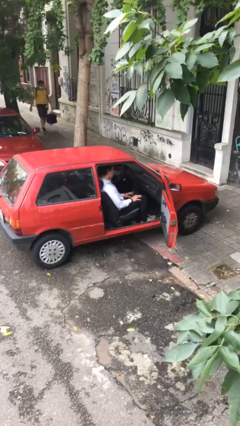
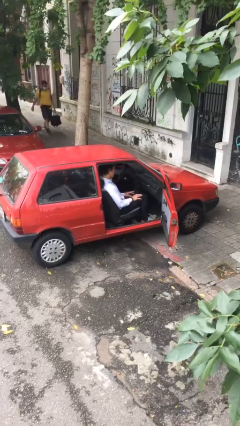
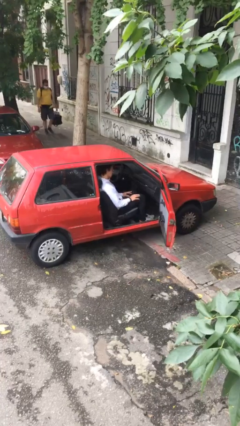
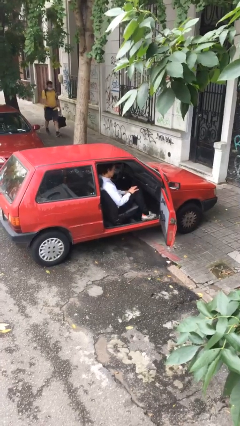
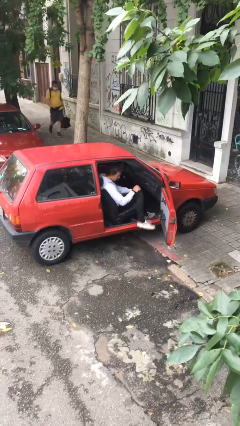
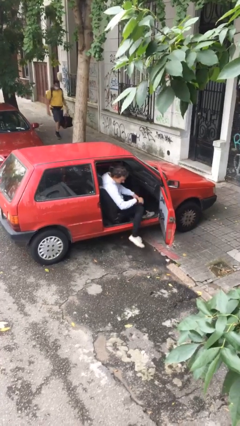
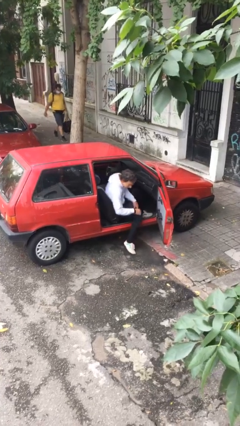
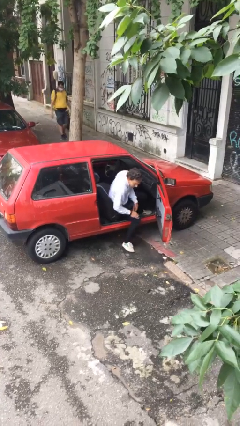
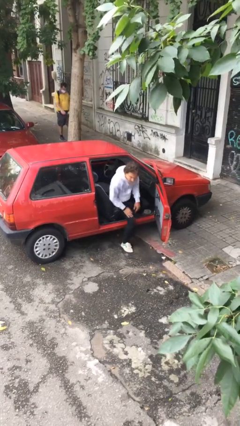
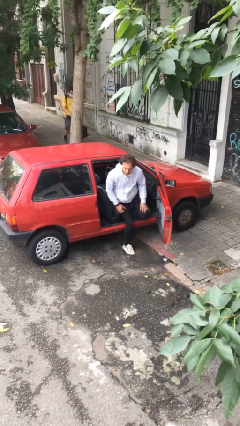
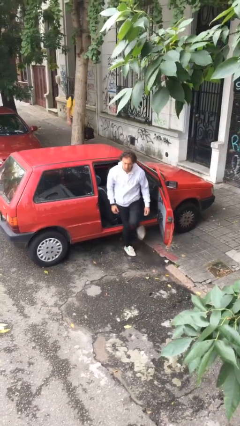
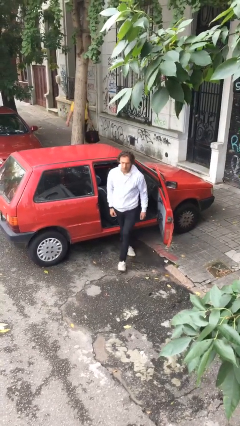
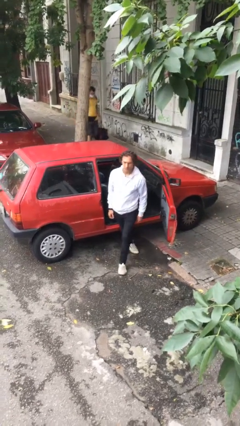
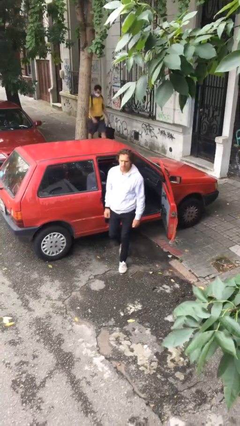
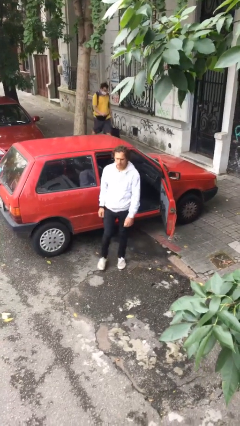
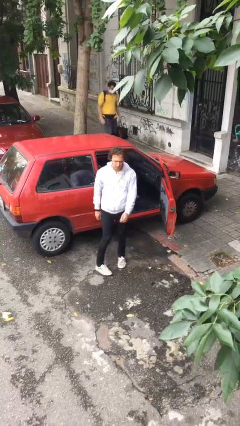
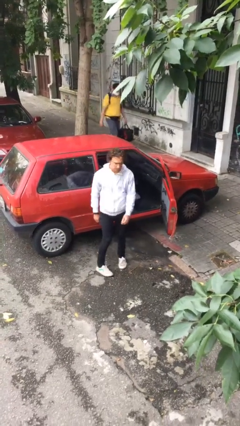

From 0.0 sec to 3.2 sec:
person exits car

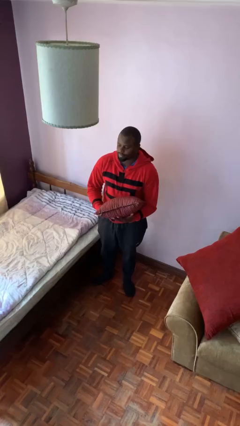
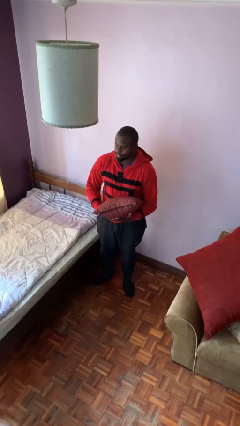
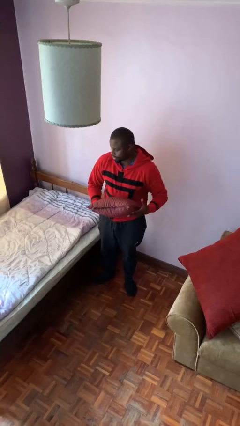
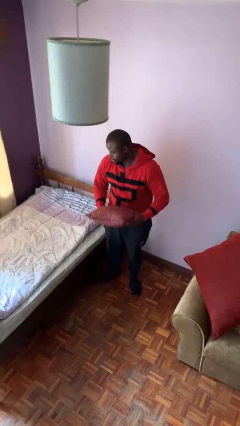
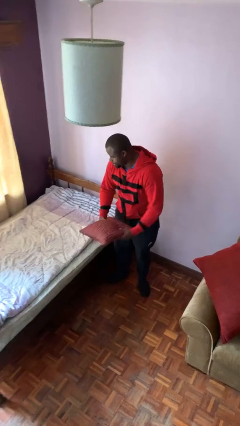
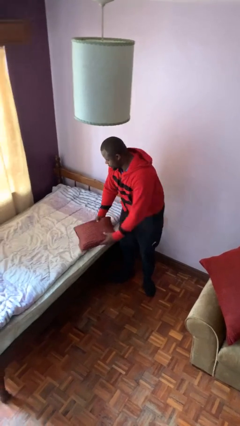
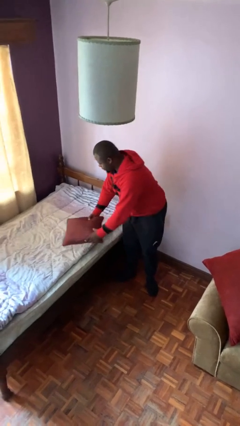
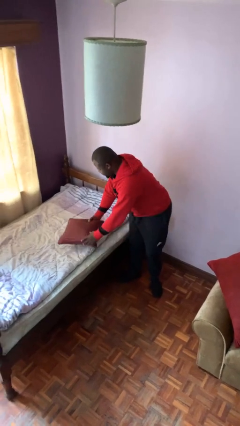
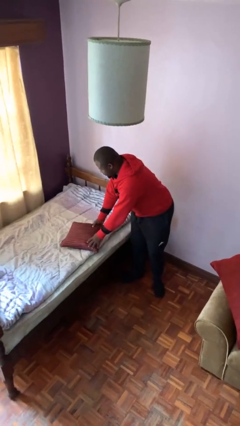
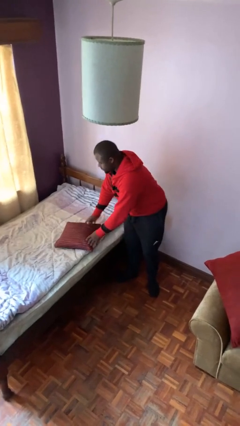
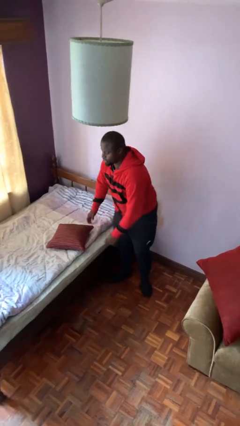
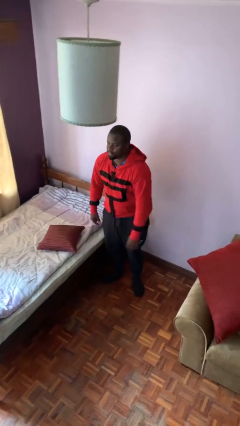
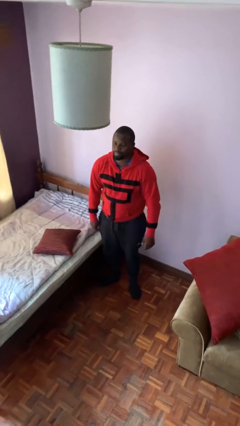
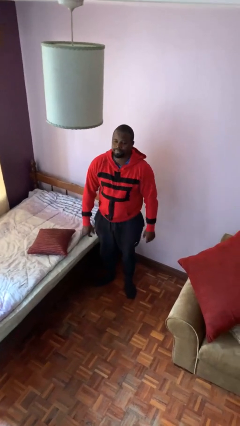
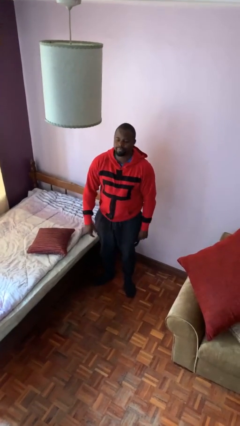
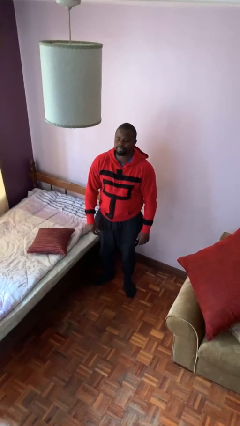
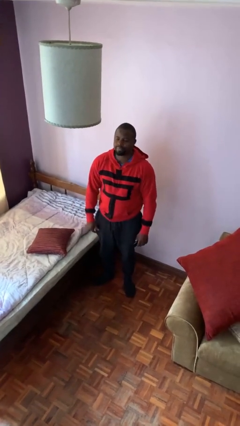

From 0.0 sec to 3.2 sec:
person puts down object on bed

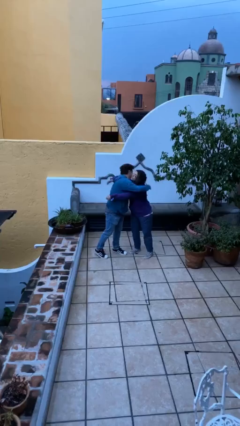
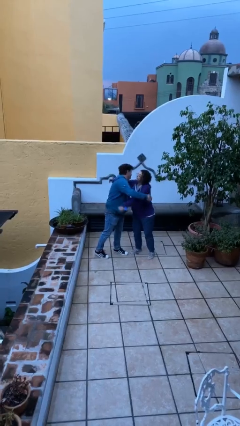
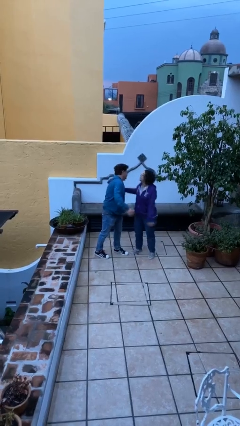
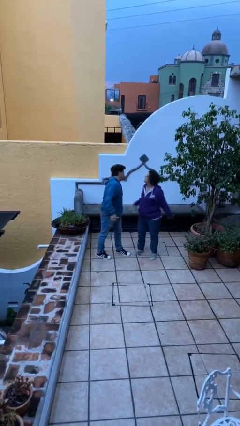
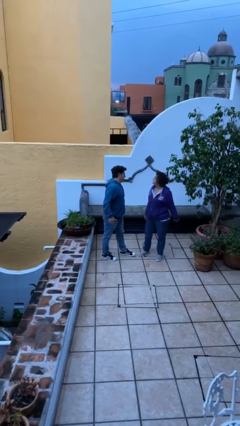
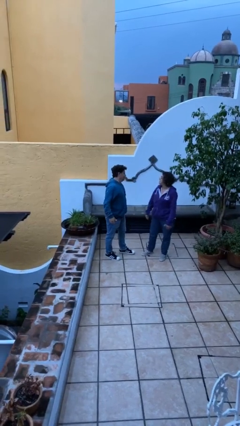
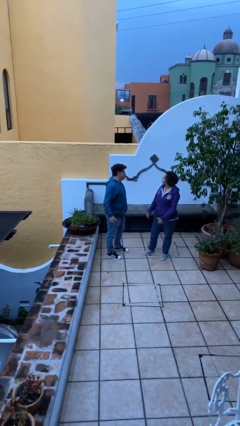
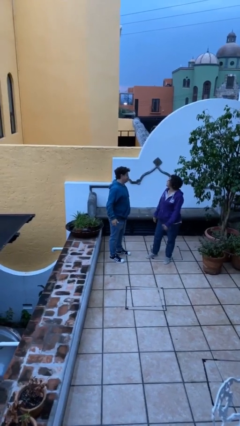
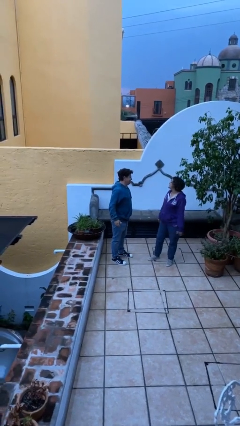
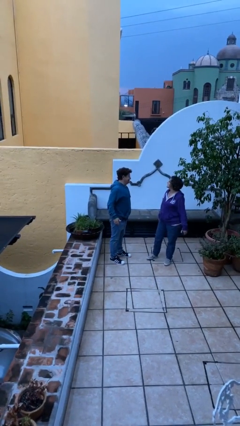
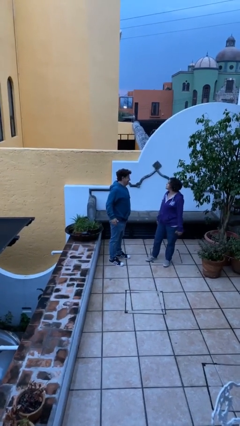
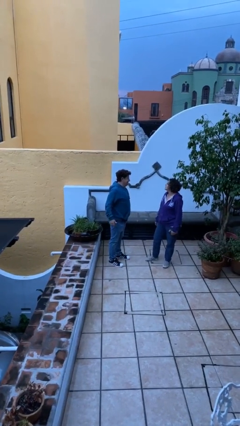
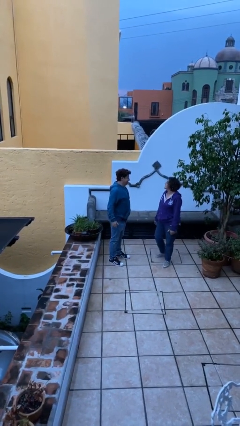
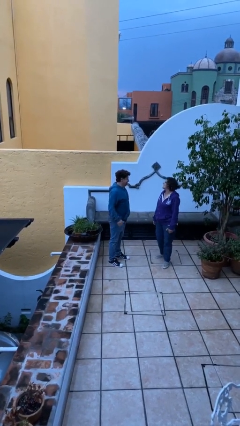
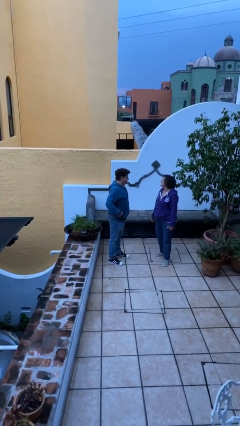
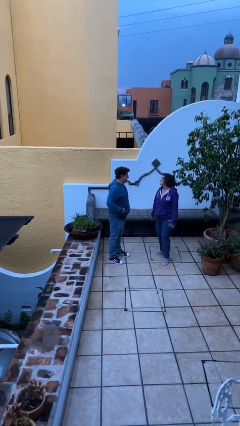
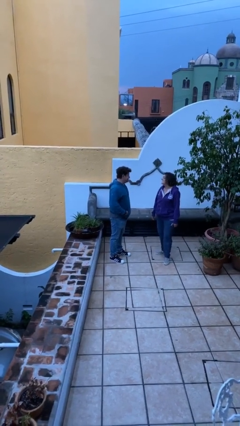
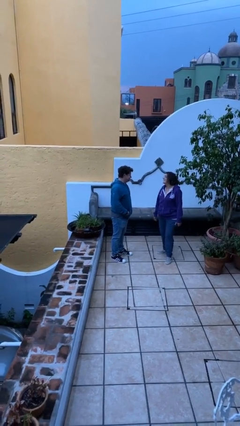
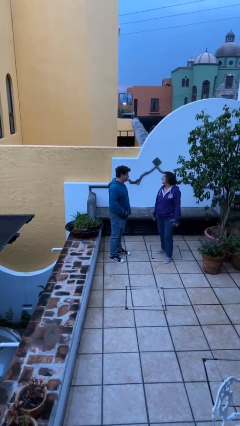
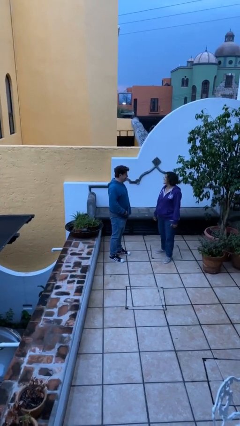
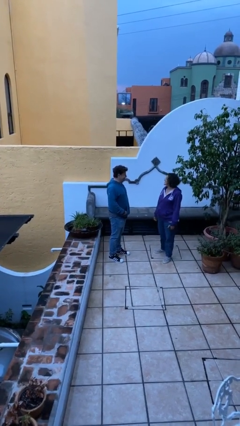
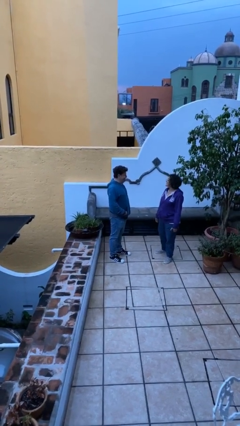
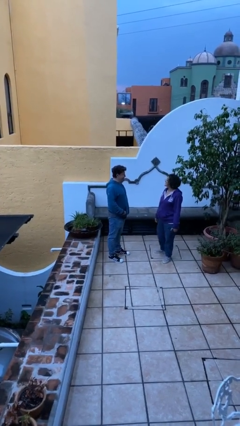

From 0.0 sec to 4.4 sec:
person talks to person

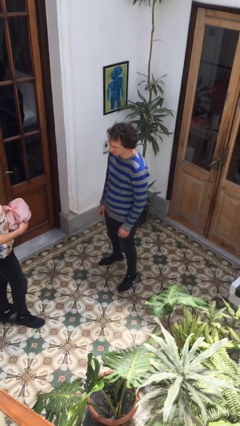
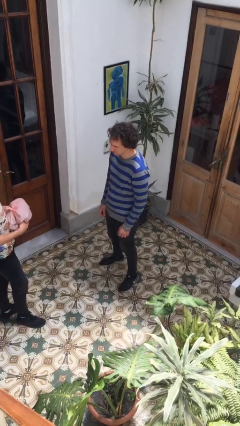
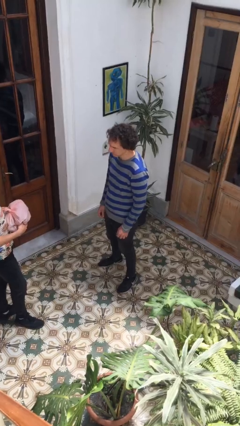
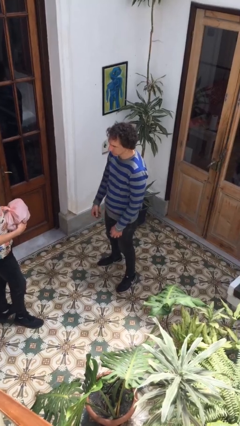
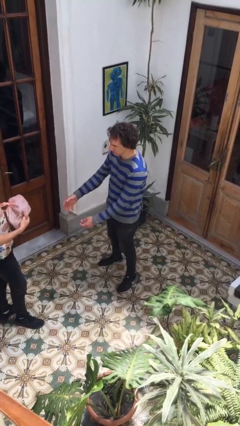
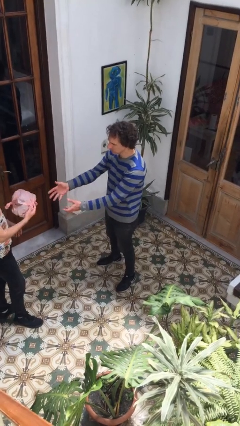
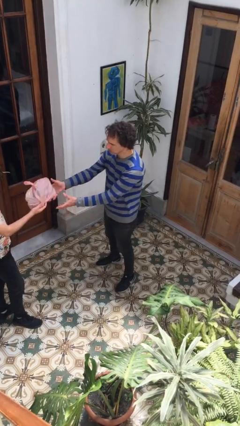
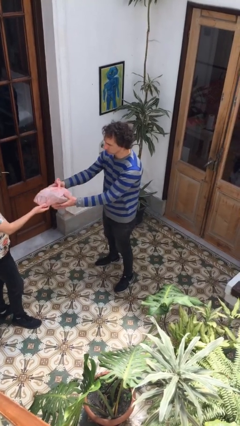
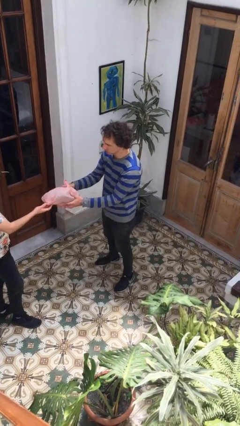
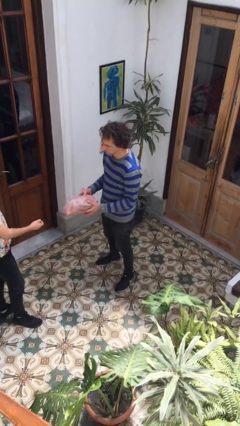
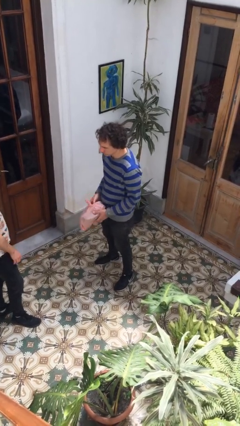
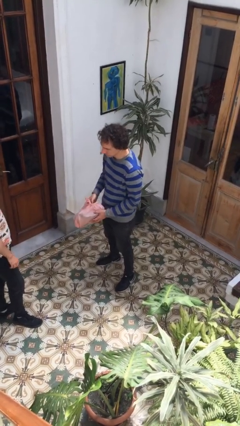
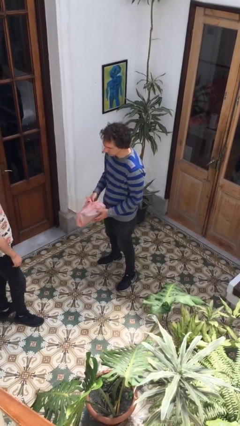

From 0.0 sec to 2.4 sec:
person transfers object to person

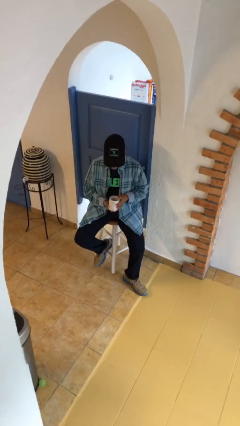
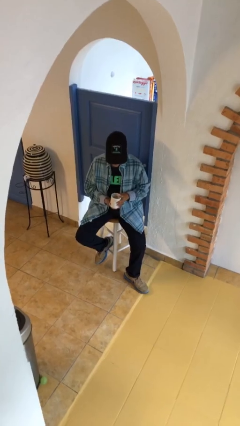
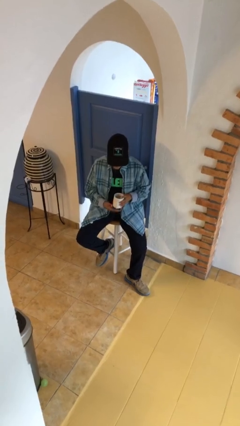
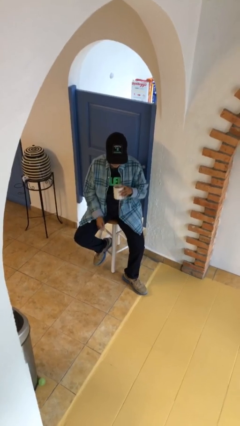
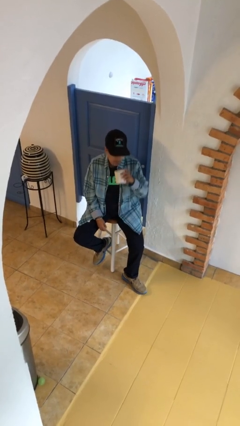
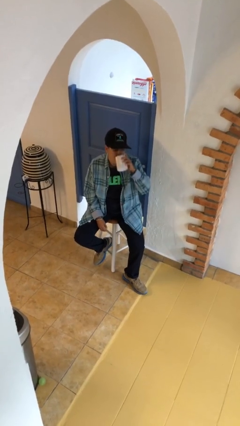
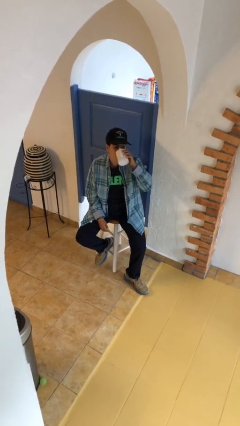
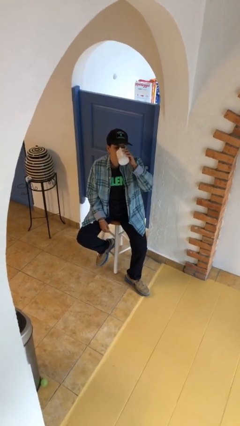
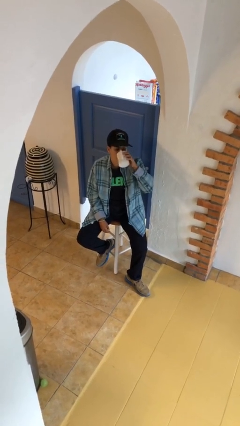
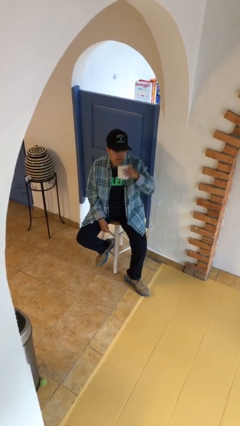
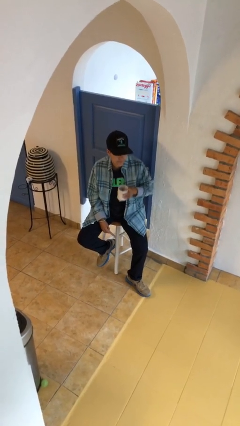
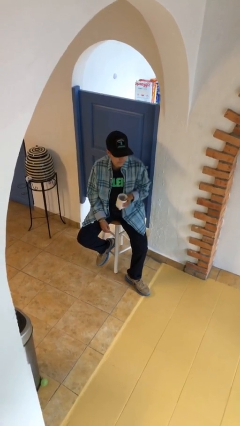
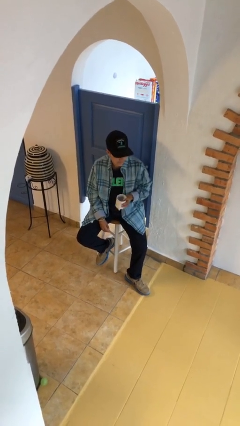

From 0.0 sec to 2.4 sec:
person drinks from mug

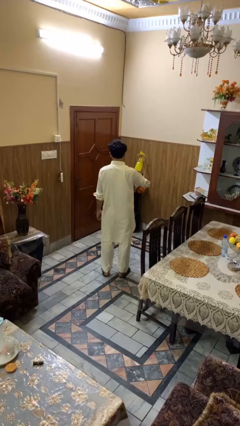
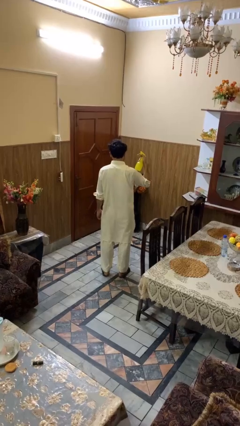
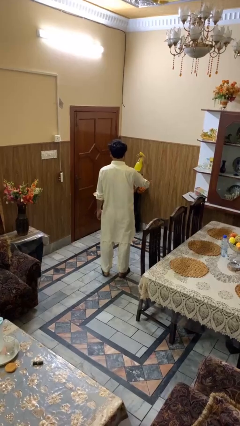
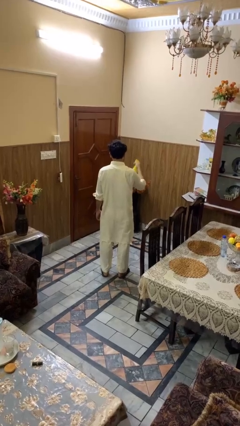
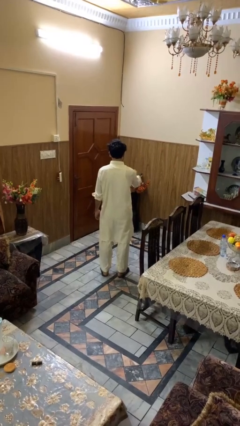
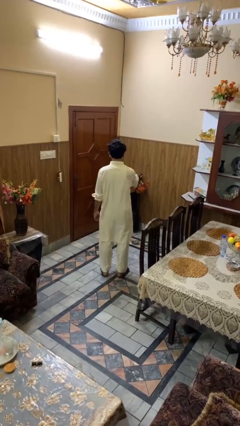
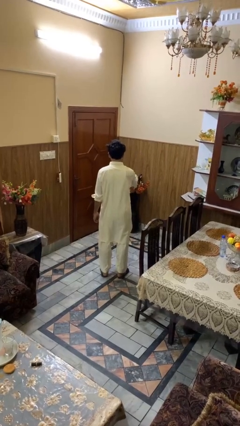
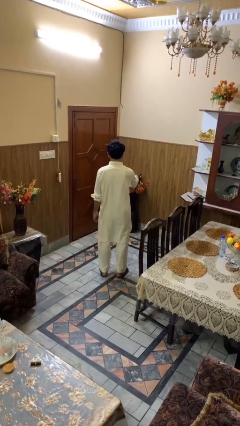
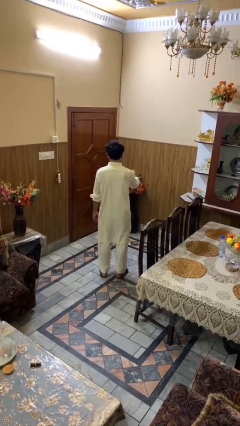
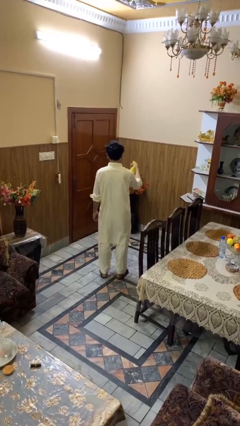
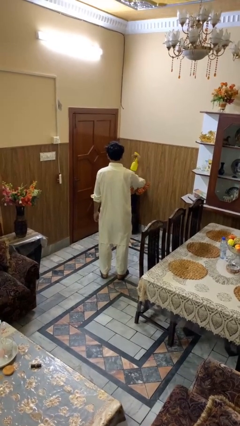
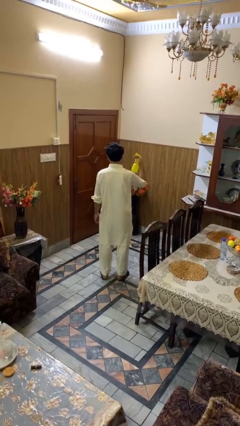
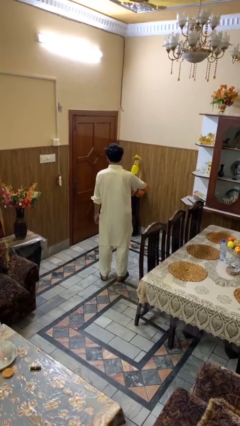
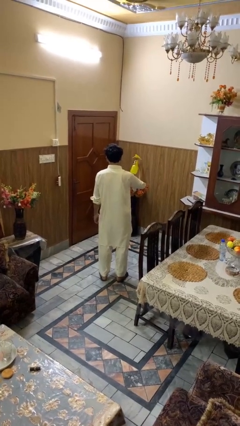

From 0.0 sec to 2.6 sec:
person sprays from bottle
